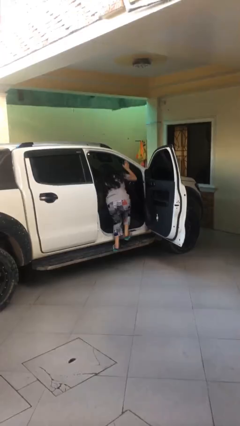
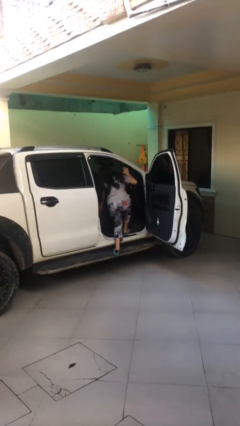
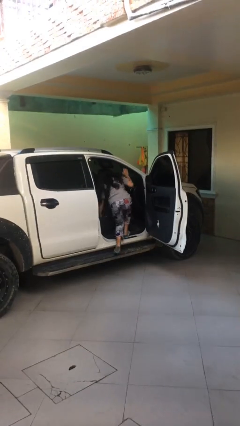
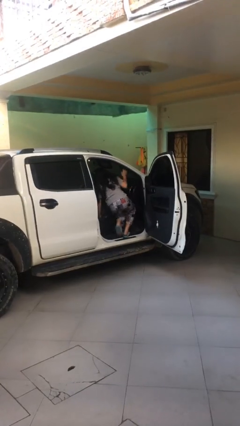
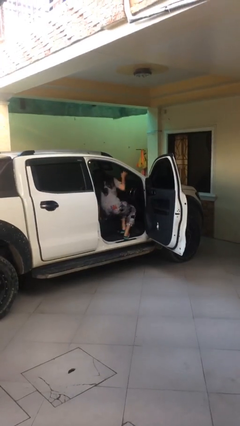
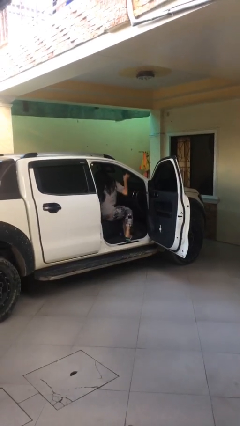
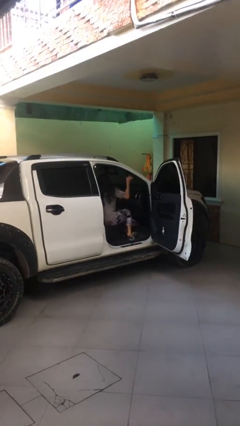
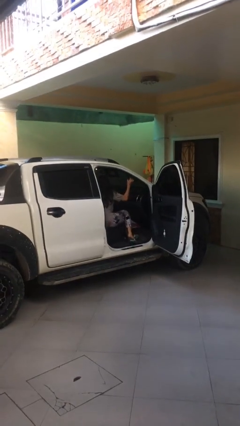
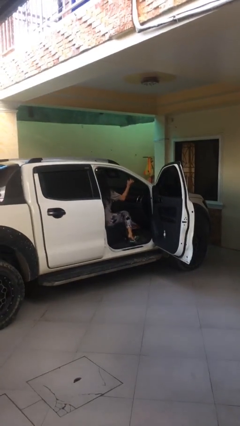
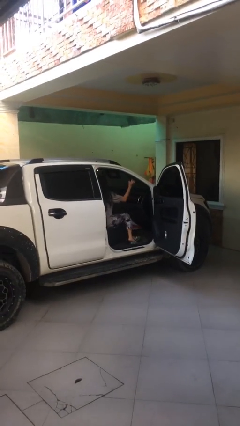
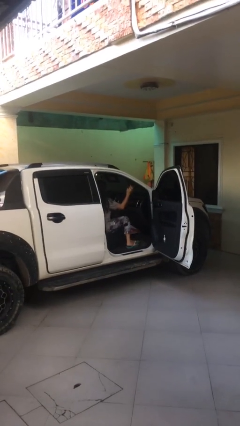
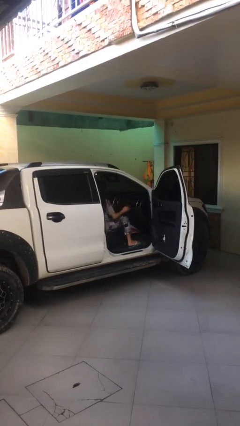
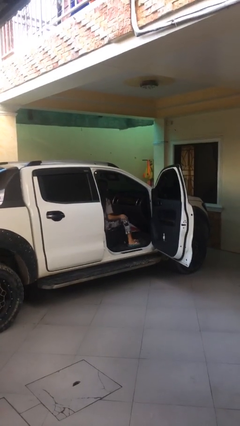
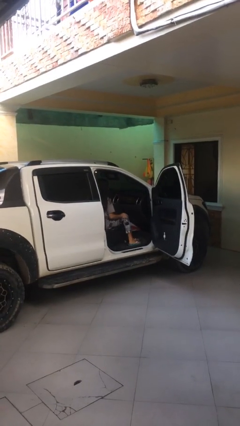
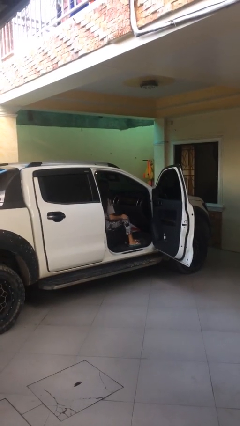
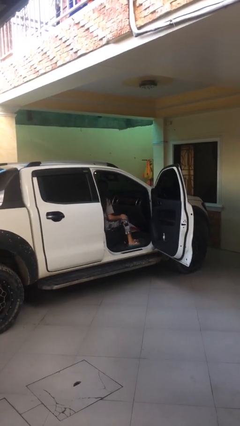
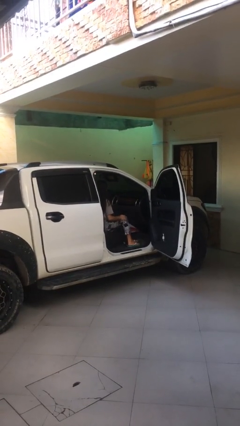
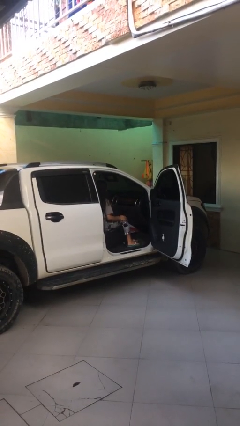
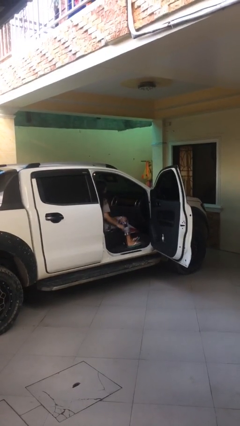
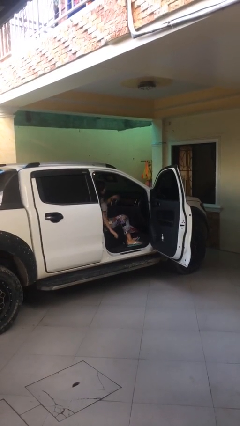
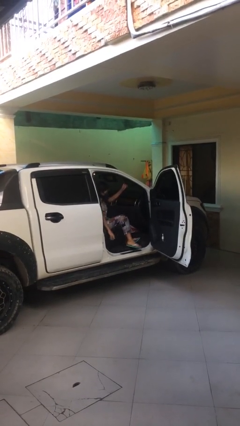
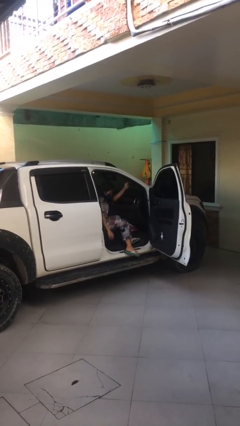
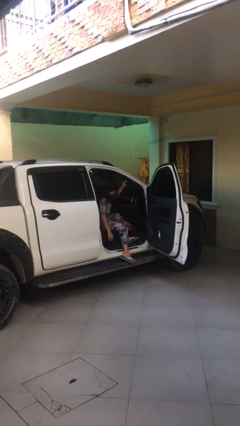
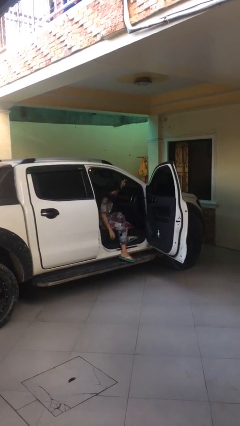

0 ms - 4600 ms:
person enters car

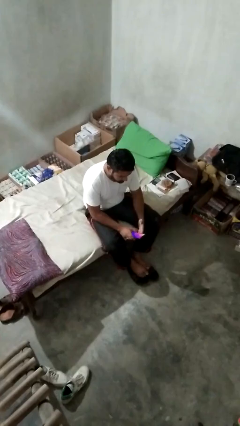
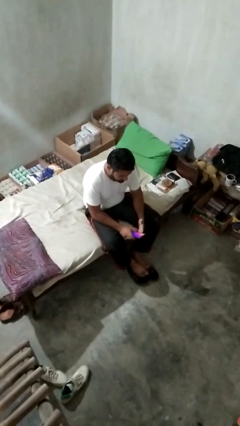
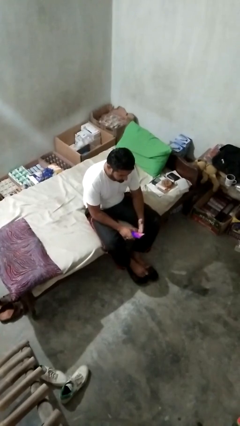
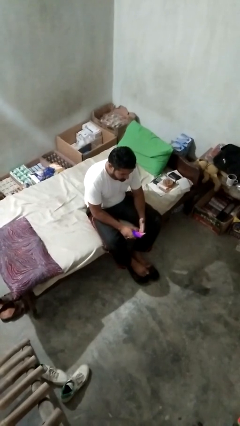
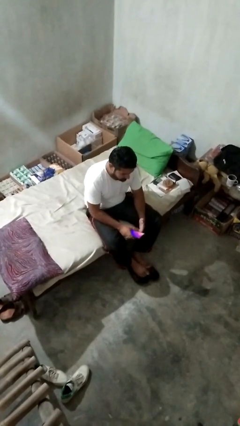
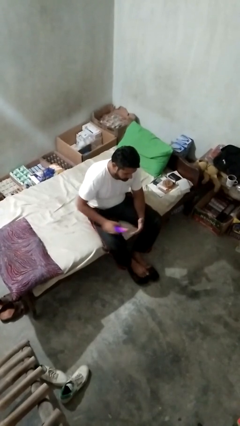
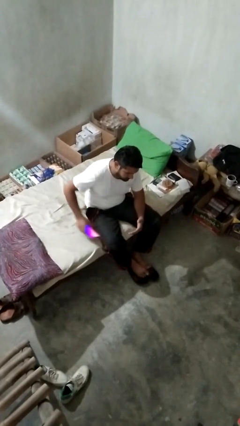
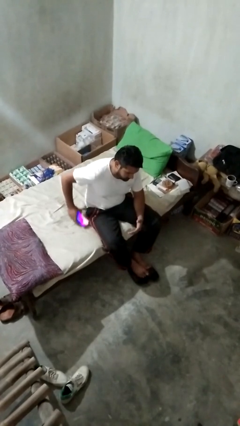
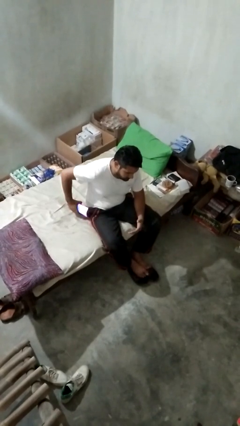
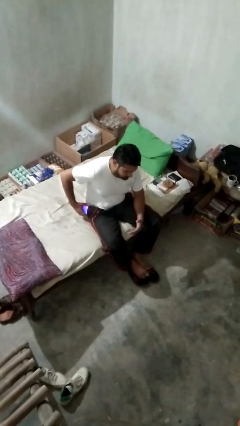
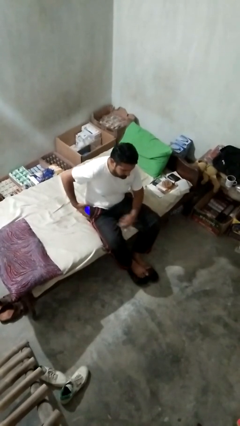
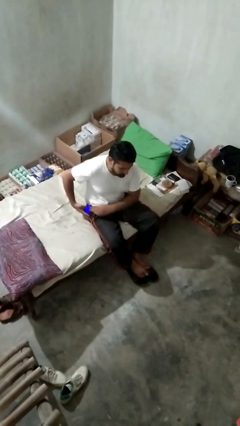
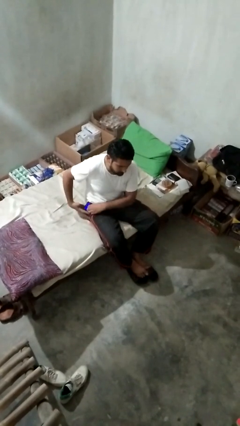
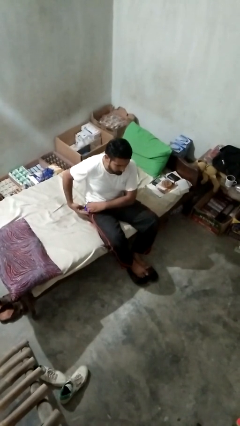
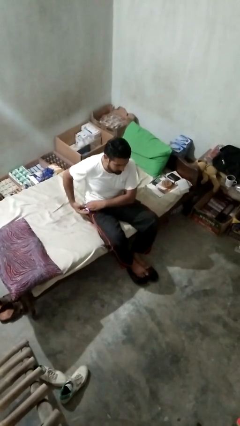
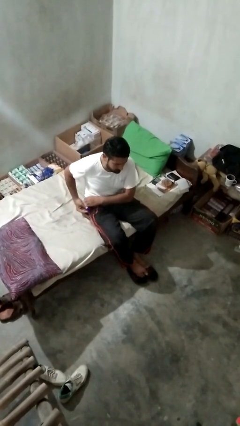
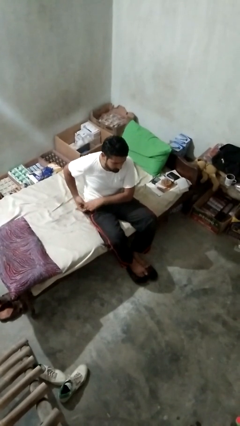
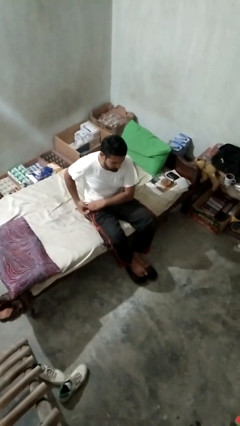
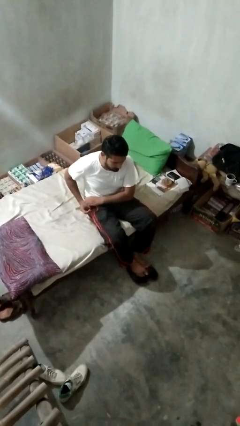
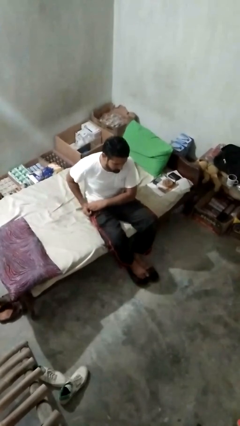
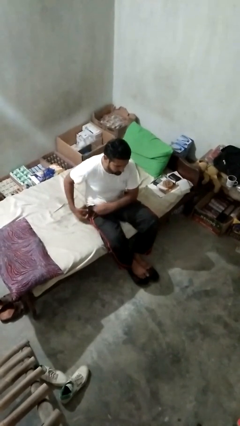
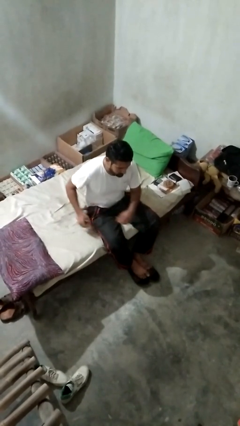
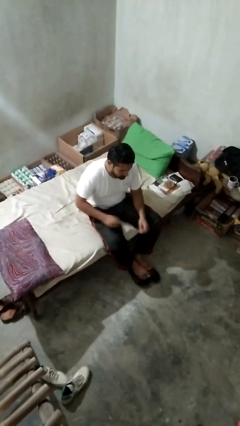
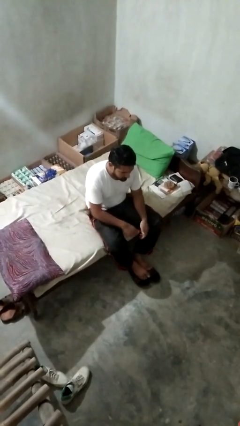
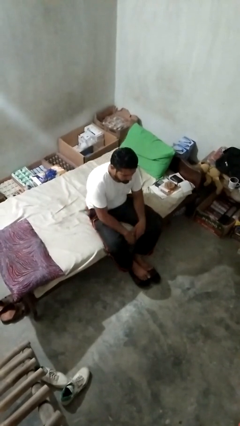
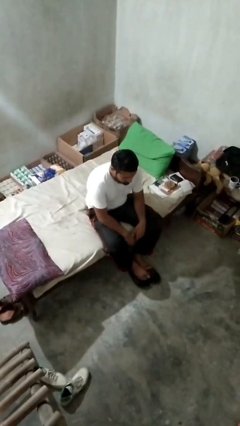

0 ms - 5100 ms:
person puts phone into pocket

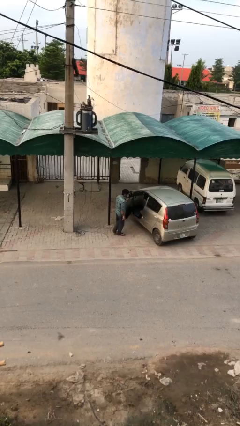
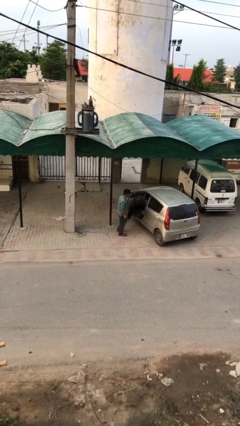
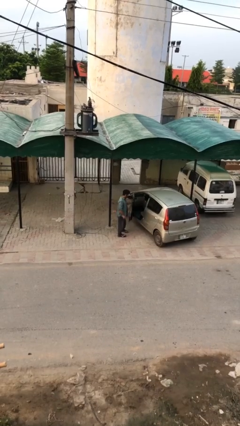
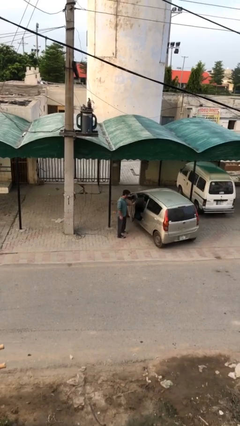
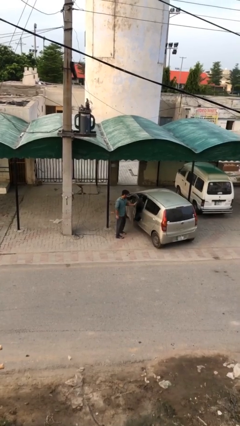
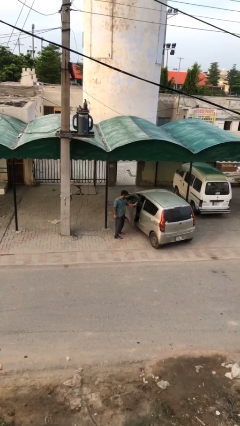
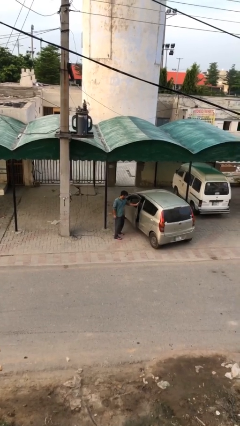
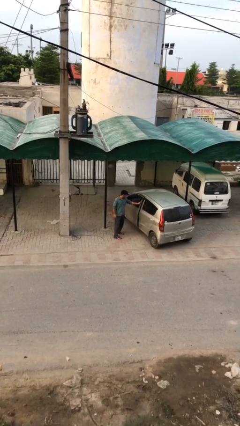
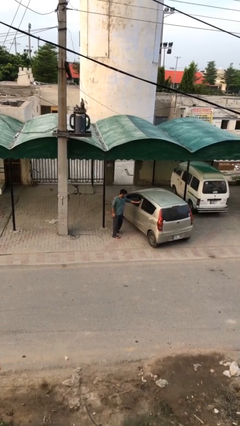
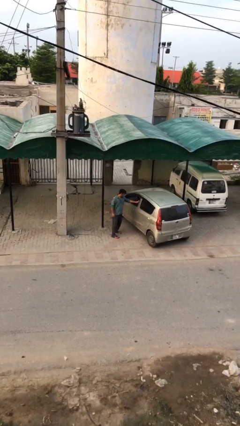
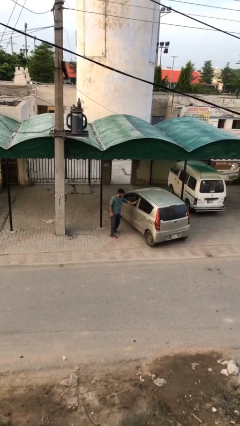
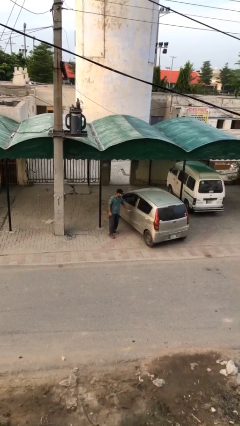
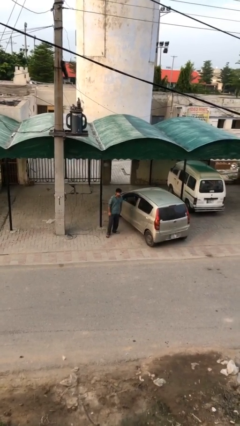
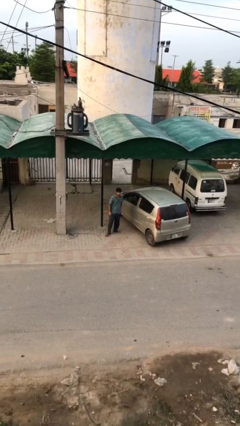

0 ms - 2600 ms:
person closes car door

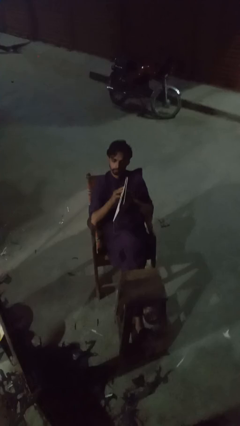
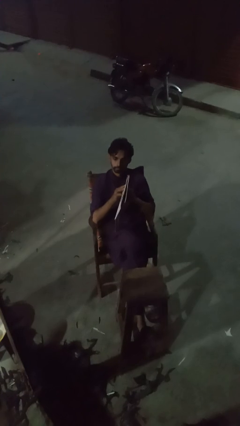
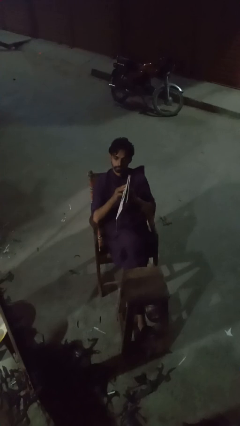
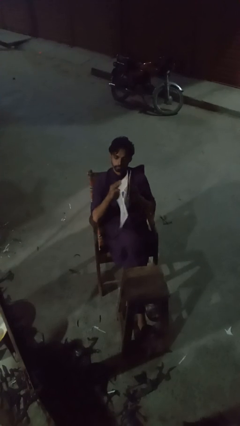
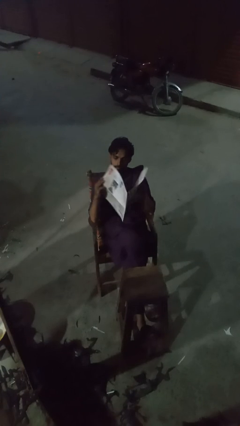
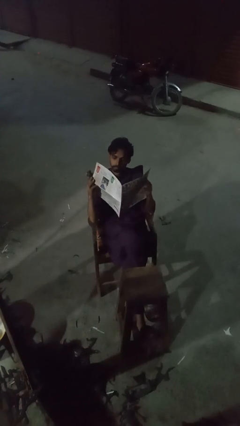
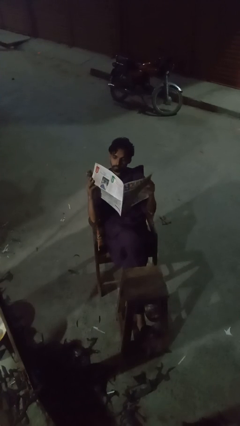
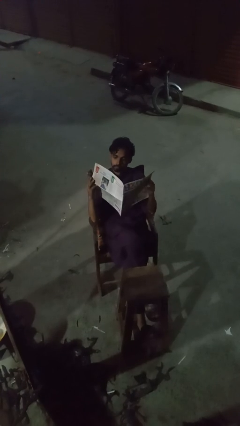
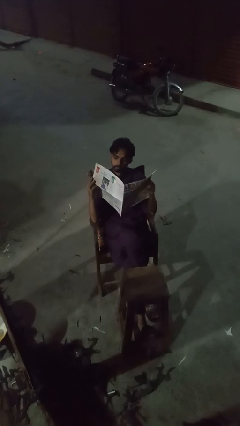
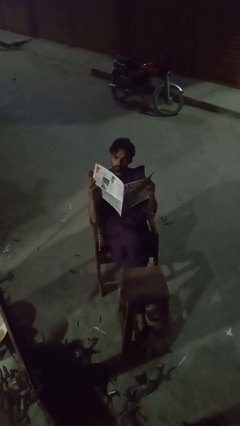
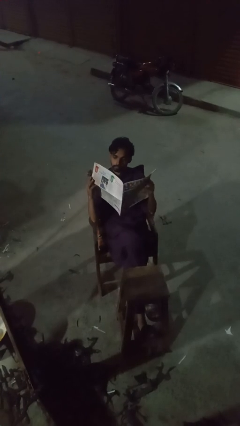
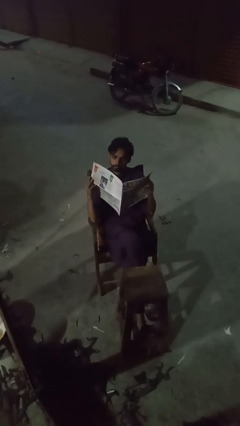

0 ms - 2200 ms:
person reads newspaper

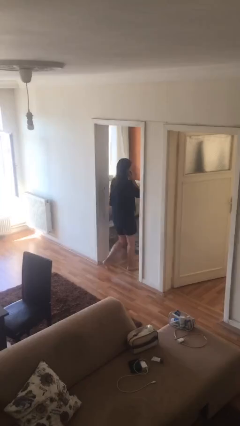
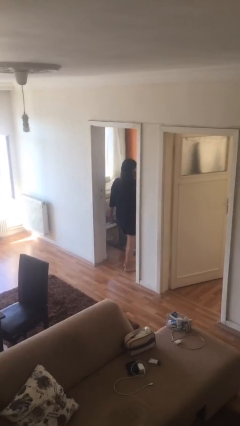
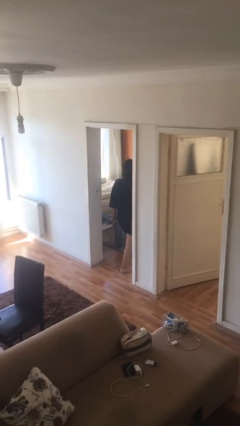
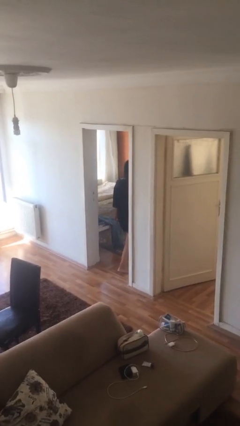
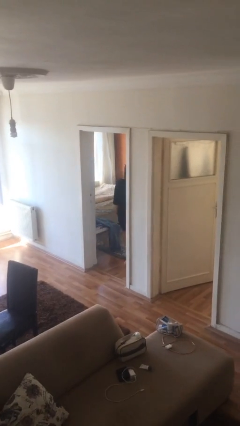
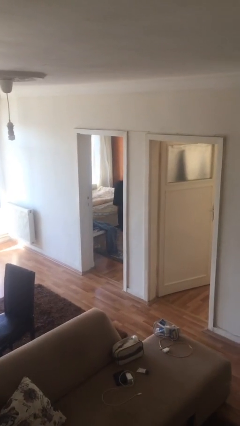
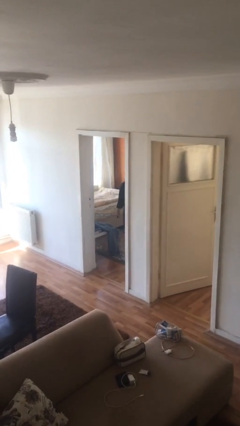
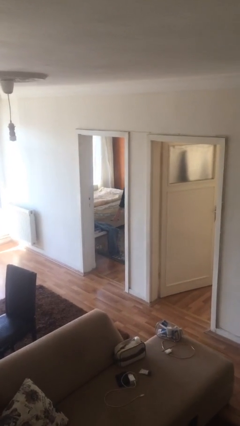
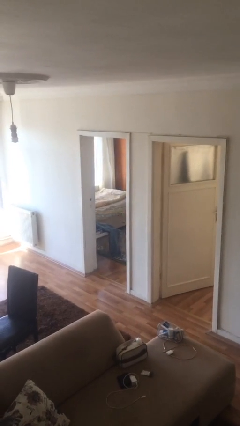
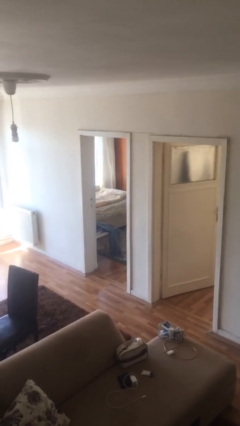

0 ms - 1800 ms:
person exits scene through structure

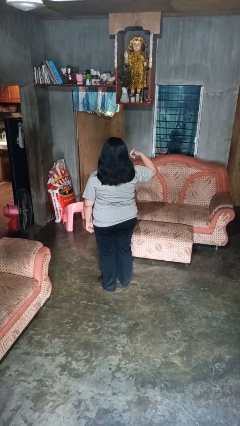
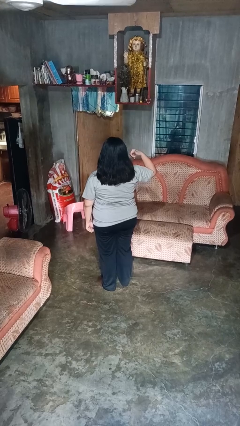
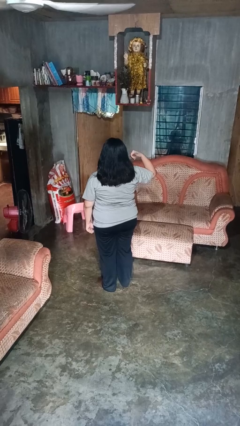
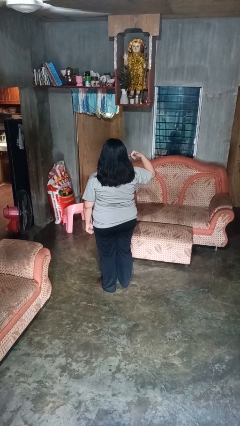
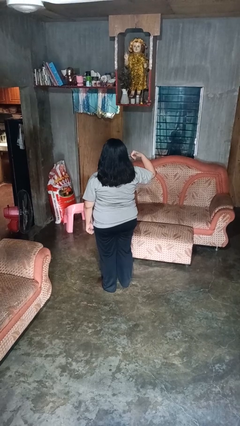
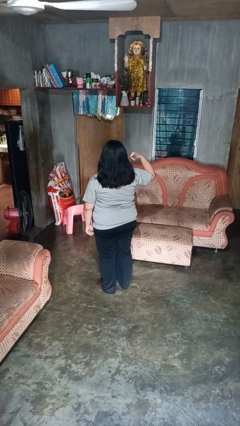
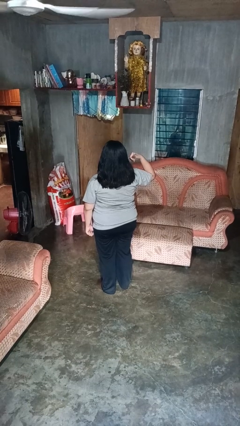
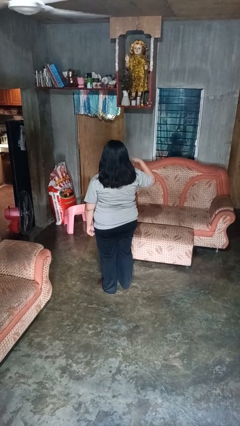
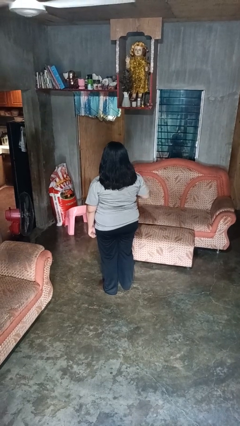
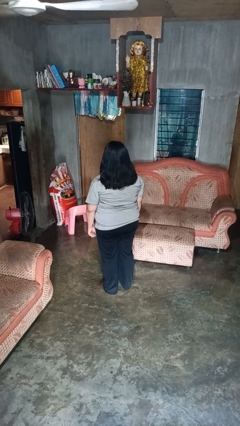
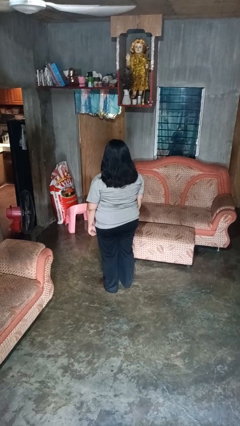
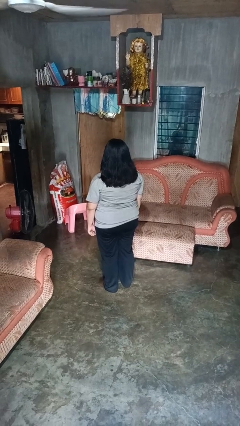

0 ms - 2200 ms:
person gestures call me
